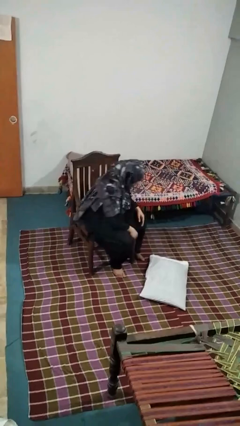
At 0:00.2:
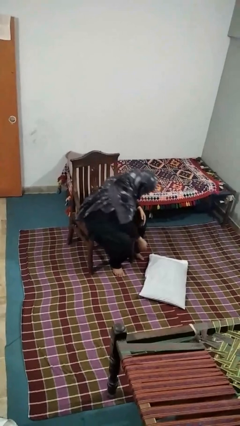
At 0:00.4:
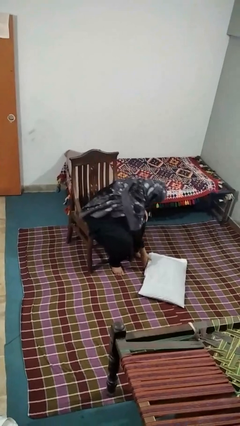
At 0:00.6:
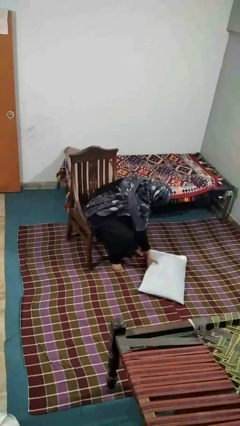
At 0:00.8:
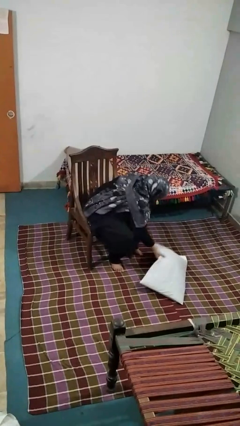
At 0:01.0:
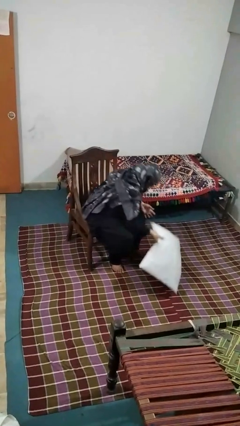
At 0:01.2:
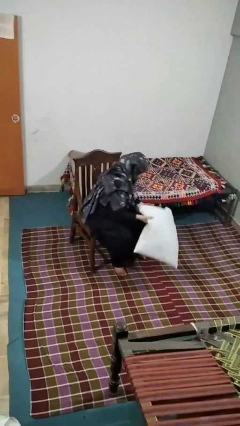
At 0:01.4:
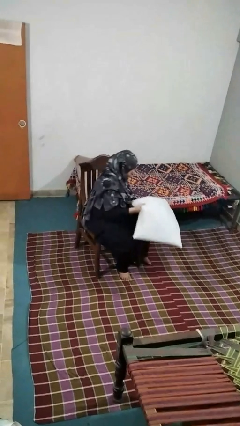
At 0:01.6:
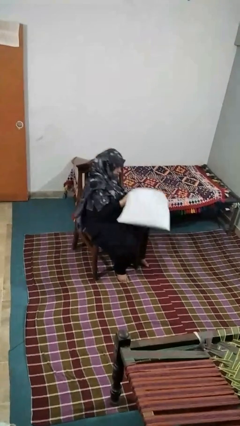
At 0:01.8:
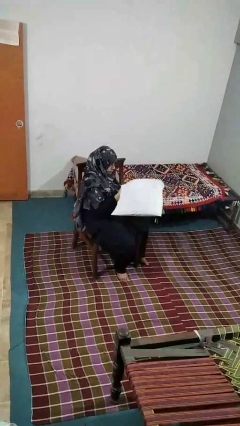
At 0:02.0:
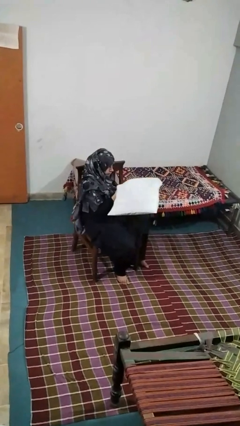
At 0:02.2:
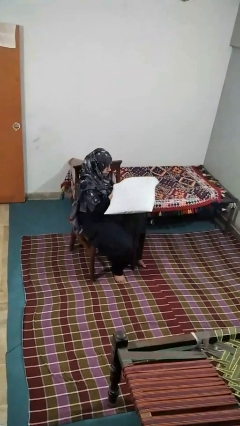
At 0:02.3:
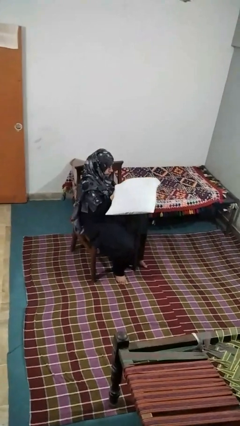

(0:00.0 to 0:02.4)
person picks up object from floor

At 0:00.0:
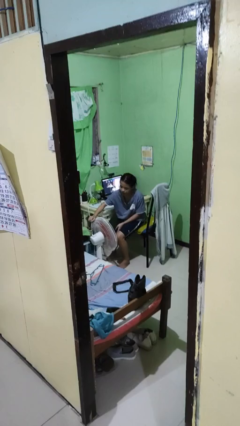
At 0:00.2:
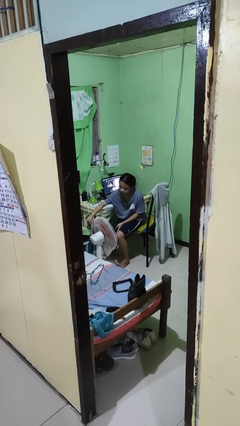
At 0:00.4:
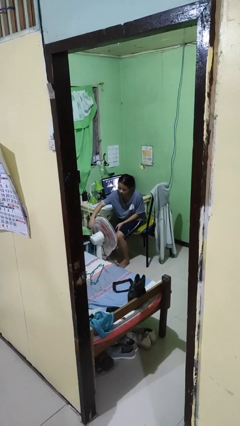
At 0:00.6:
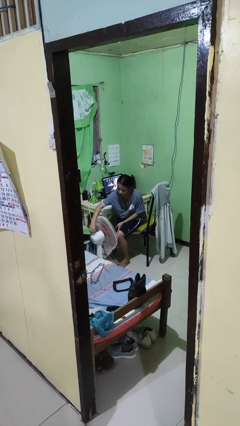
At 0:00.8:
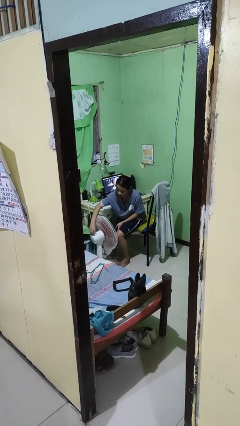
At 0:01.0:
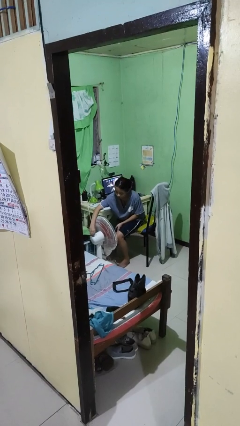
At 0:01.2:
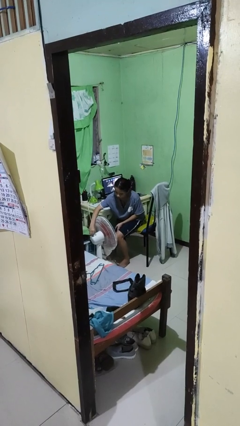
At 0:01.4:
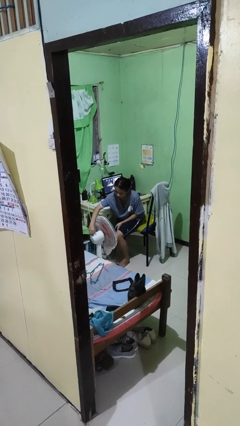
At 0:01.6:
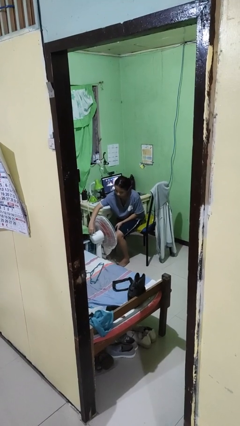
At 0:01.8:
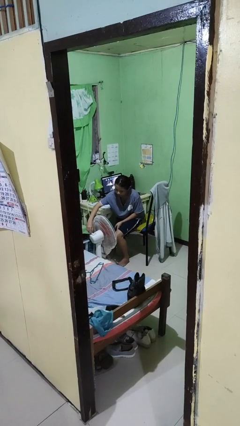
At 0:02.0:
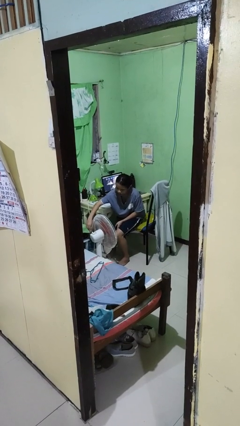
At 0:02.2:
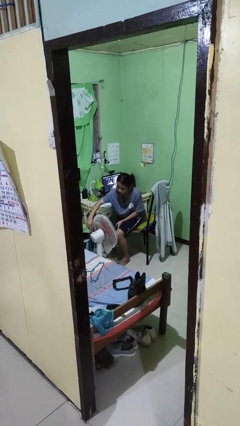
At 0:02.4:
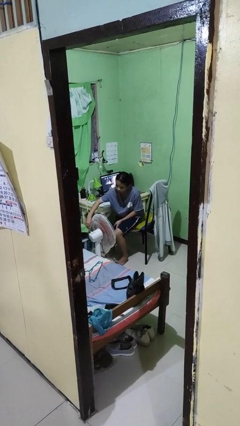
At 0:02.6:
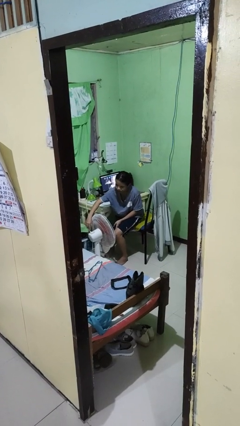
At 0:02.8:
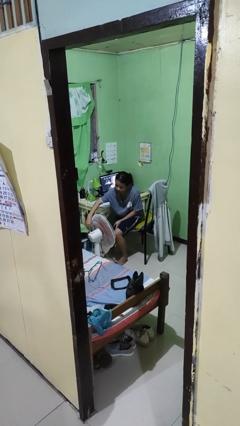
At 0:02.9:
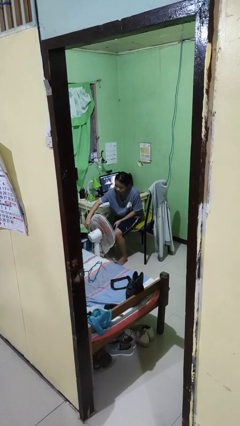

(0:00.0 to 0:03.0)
person turns on fan

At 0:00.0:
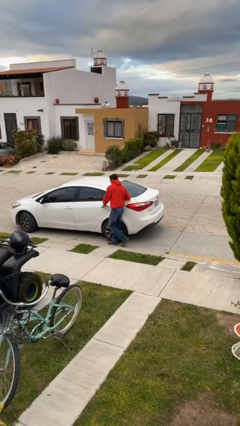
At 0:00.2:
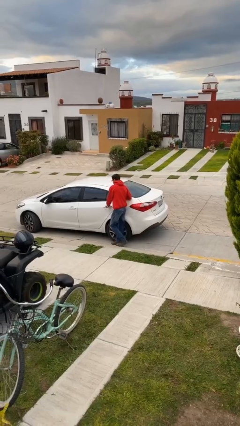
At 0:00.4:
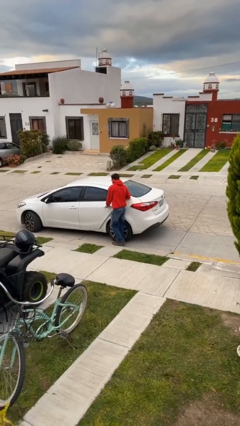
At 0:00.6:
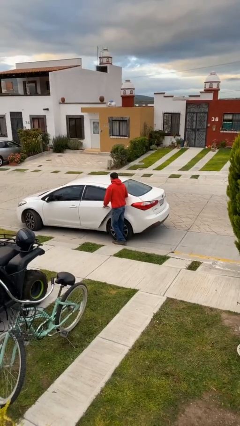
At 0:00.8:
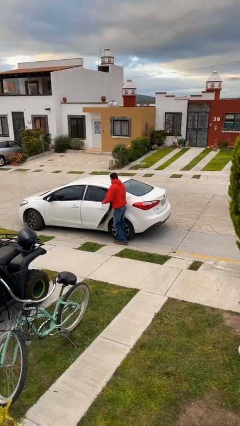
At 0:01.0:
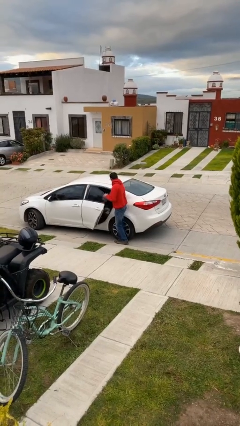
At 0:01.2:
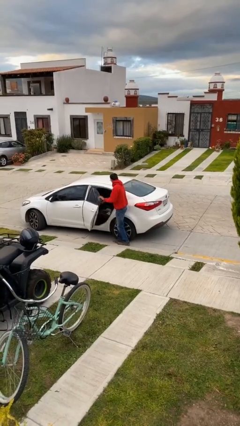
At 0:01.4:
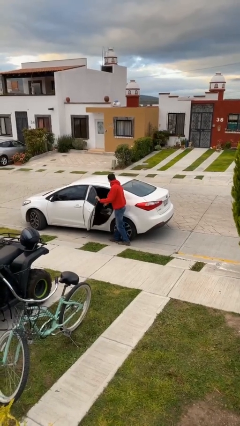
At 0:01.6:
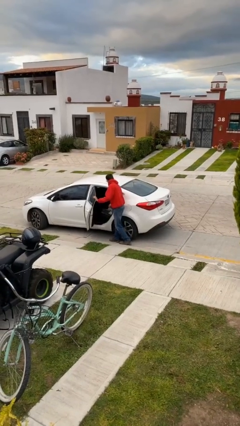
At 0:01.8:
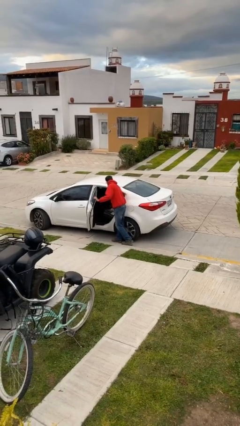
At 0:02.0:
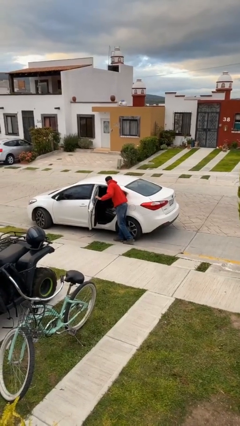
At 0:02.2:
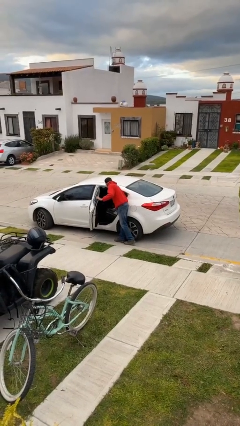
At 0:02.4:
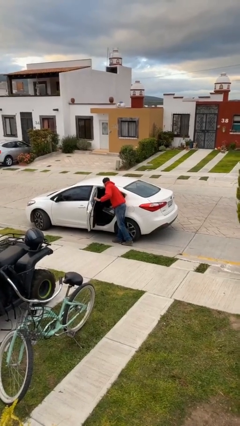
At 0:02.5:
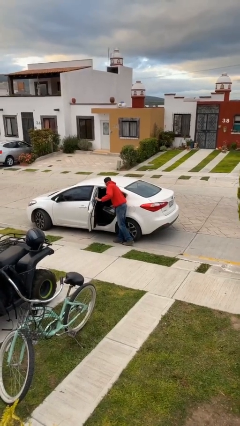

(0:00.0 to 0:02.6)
person opens car door

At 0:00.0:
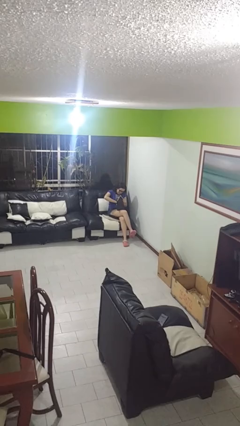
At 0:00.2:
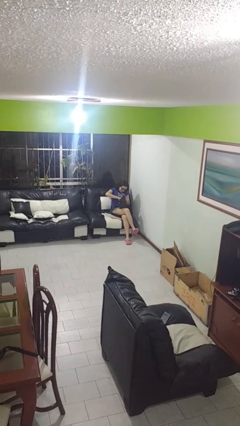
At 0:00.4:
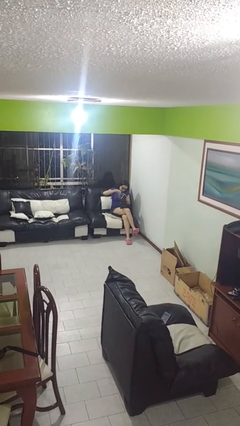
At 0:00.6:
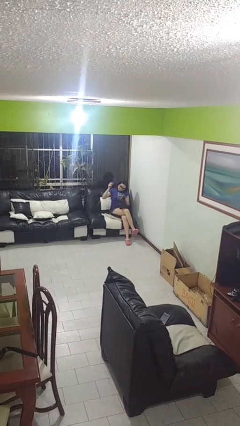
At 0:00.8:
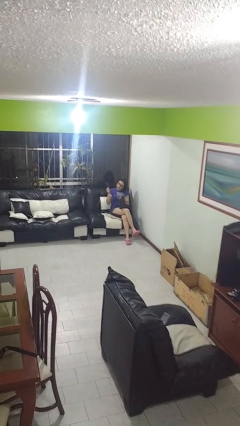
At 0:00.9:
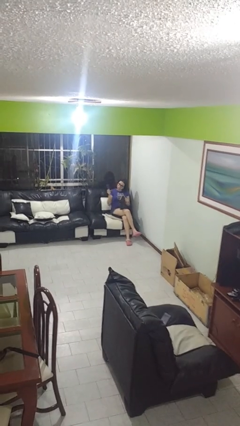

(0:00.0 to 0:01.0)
person takes object from purse

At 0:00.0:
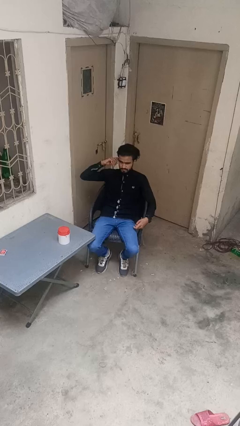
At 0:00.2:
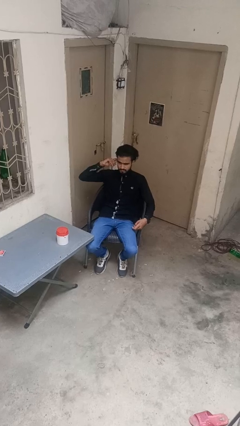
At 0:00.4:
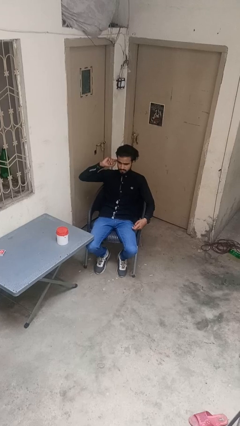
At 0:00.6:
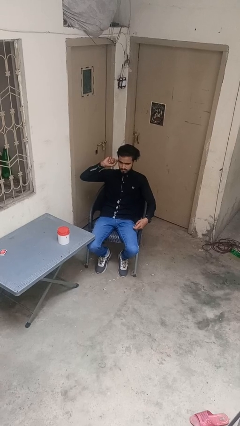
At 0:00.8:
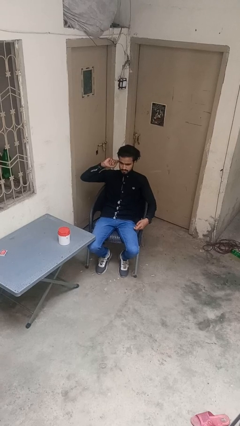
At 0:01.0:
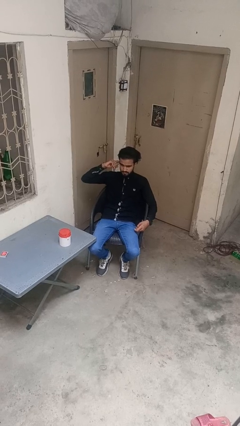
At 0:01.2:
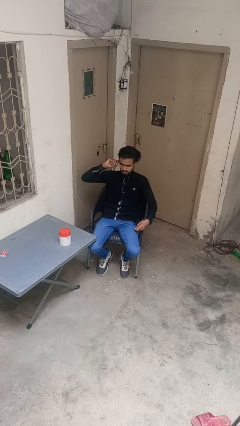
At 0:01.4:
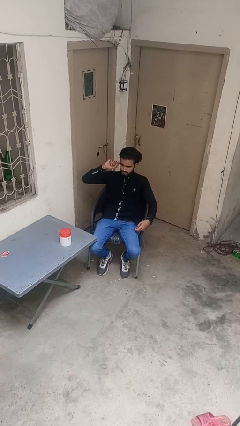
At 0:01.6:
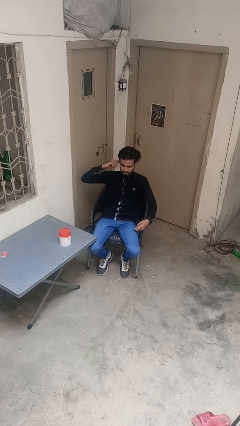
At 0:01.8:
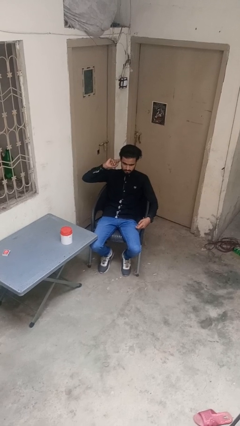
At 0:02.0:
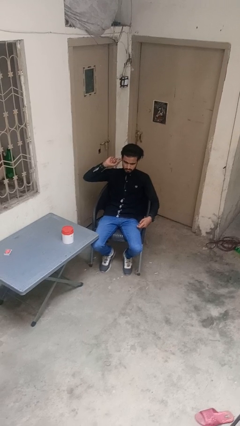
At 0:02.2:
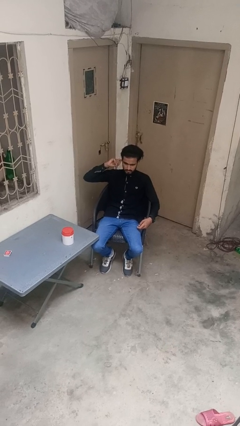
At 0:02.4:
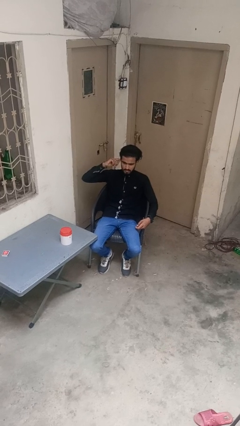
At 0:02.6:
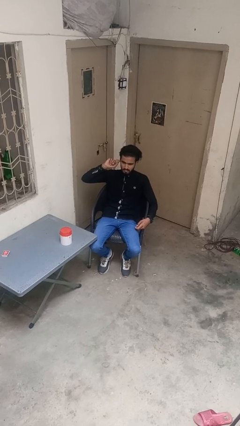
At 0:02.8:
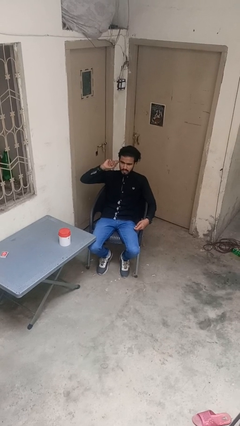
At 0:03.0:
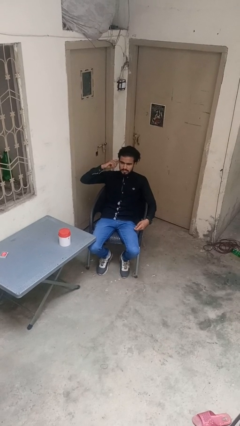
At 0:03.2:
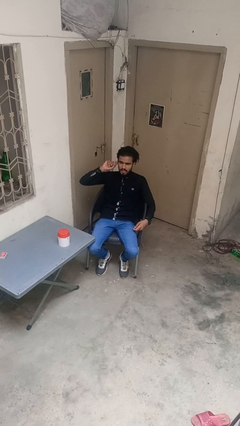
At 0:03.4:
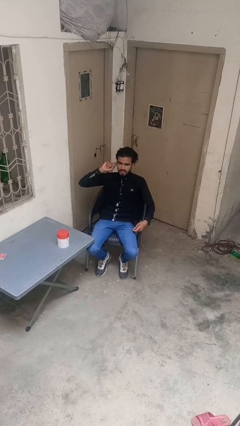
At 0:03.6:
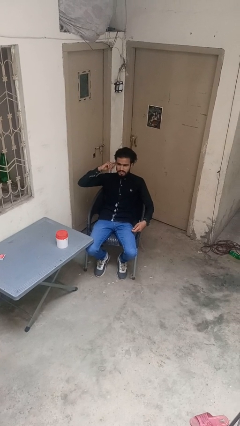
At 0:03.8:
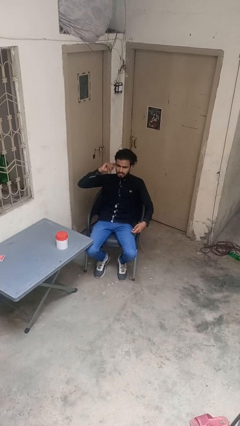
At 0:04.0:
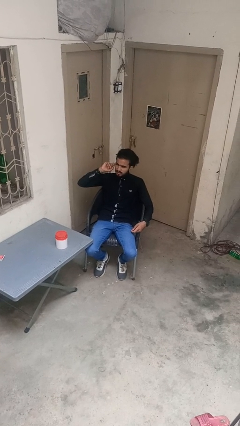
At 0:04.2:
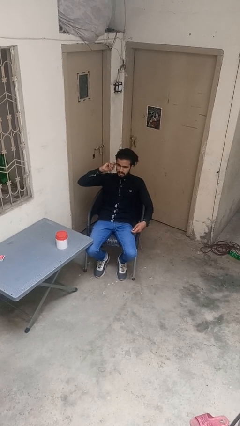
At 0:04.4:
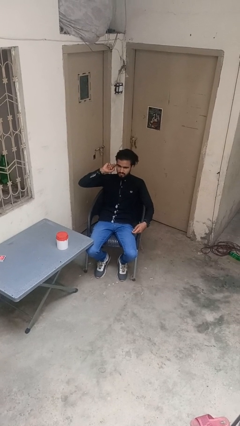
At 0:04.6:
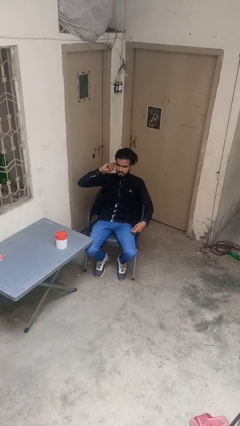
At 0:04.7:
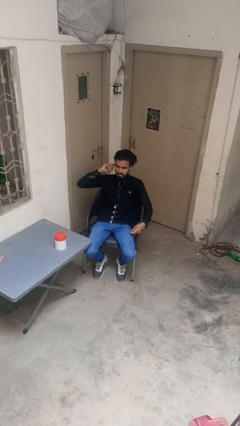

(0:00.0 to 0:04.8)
person puts fingers in ear

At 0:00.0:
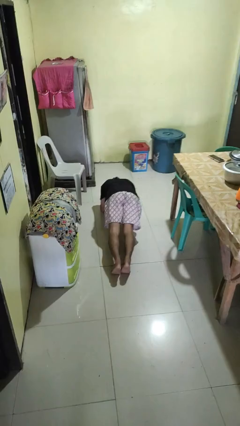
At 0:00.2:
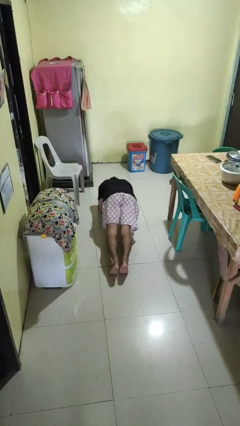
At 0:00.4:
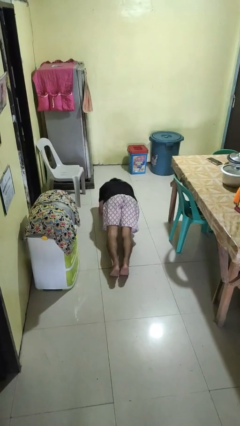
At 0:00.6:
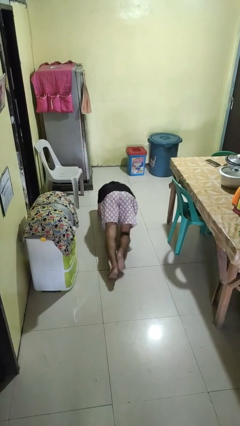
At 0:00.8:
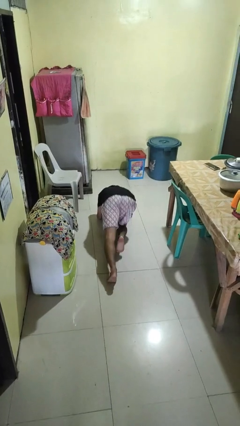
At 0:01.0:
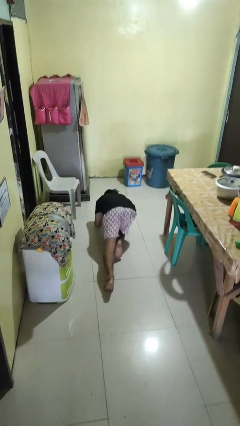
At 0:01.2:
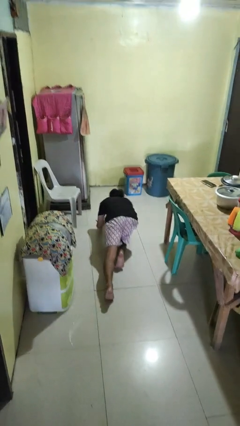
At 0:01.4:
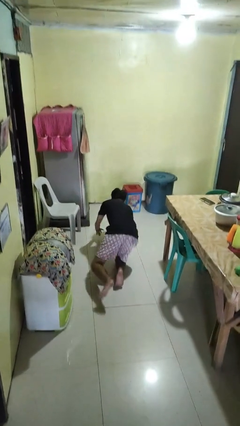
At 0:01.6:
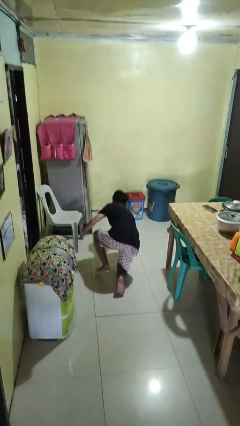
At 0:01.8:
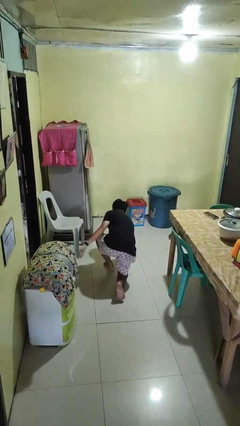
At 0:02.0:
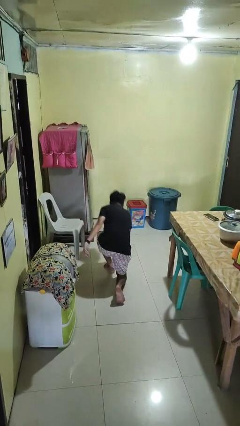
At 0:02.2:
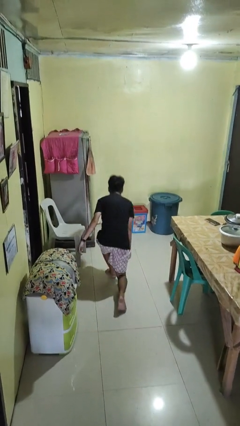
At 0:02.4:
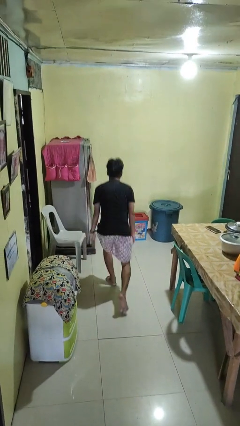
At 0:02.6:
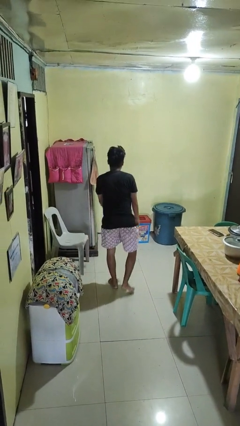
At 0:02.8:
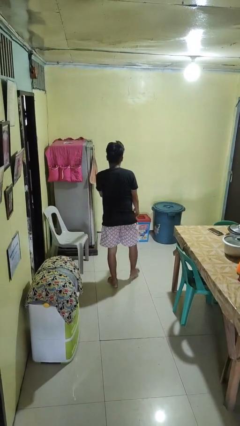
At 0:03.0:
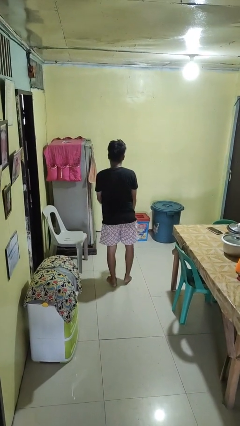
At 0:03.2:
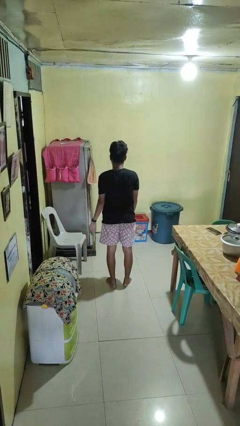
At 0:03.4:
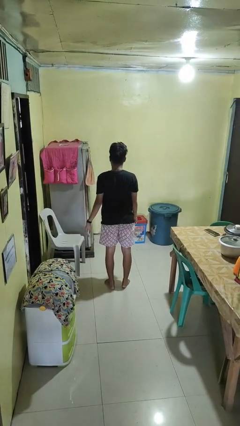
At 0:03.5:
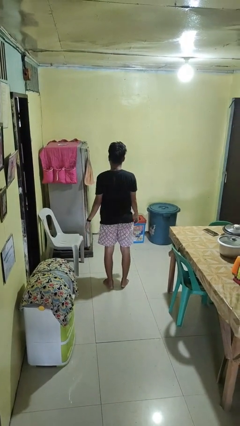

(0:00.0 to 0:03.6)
person stands up from floor
